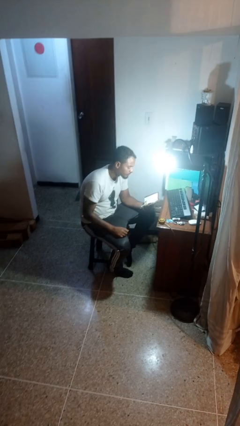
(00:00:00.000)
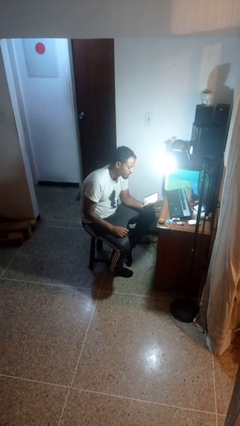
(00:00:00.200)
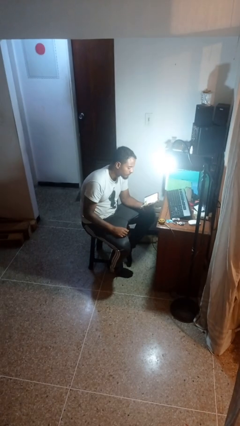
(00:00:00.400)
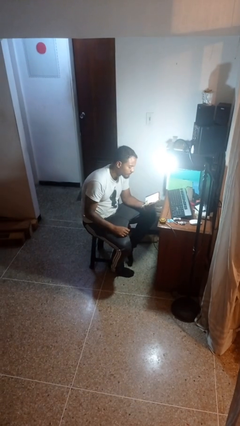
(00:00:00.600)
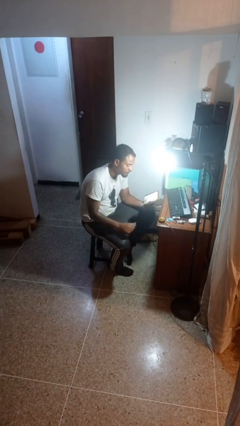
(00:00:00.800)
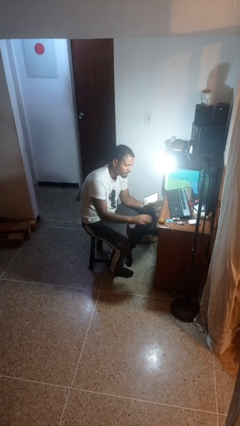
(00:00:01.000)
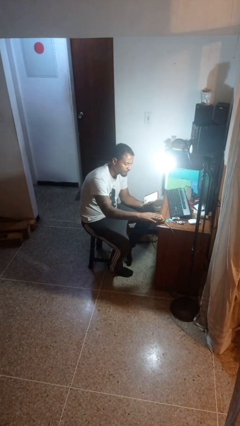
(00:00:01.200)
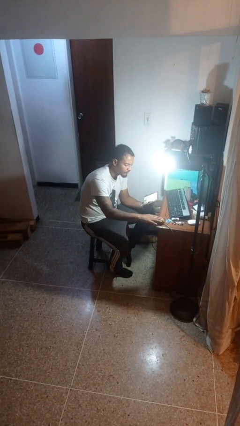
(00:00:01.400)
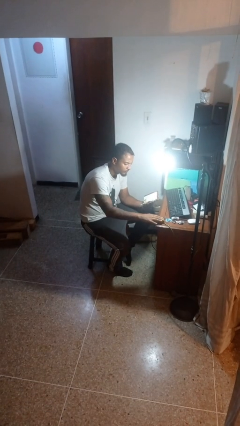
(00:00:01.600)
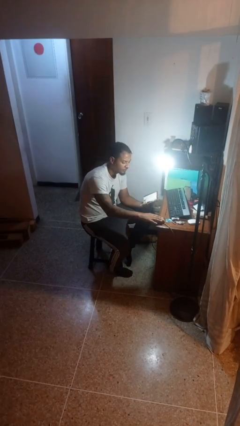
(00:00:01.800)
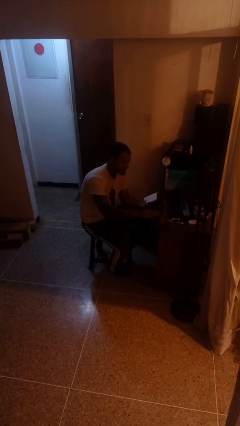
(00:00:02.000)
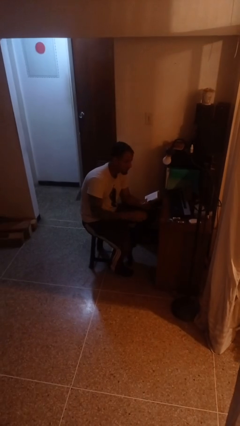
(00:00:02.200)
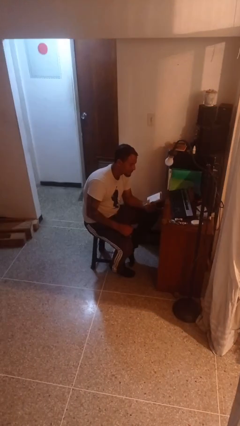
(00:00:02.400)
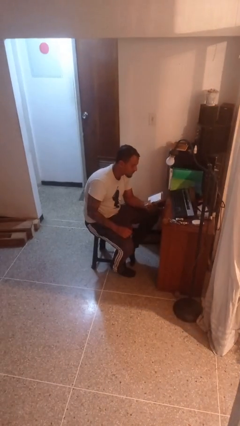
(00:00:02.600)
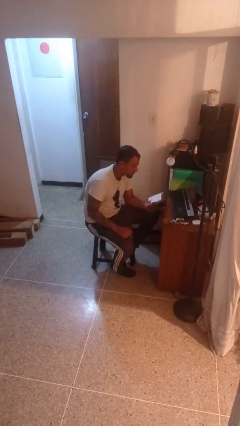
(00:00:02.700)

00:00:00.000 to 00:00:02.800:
person turns off lamp

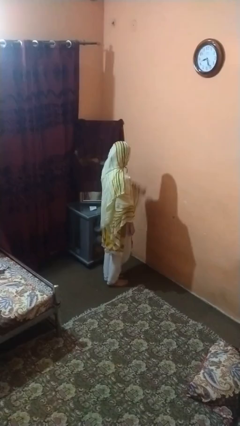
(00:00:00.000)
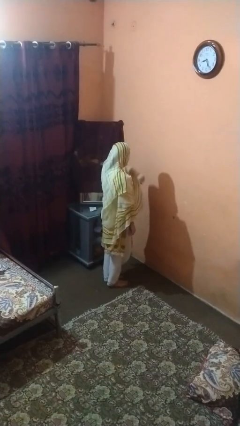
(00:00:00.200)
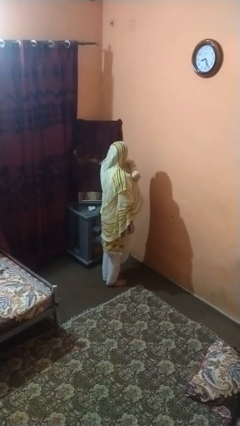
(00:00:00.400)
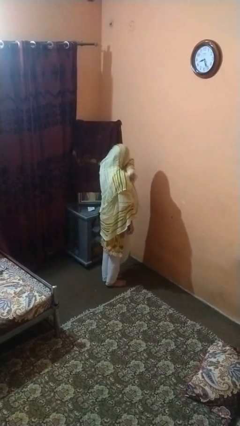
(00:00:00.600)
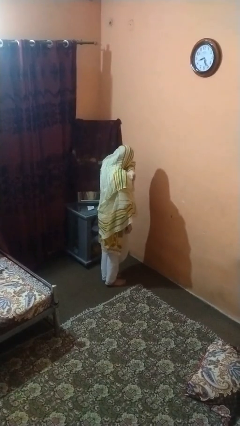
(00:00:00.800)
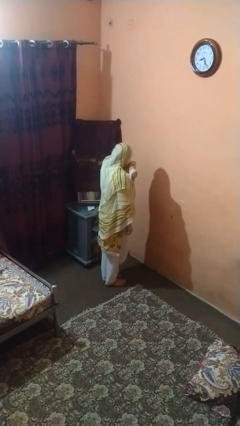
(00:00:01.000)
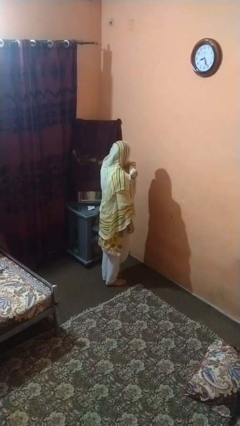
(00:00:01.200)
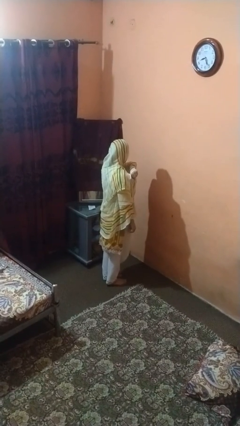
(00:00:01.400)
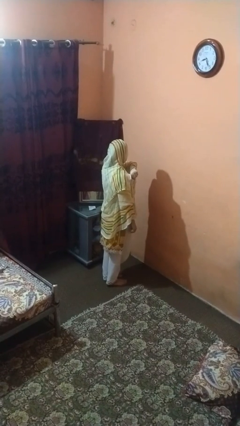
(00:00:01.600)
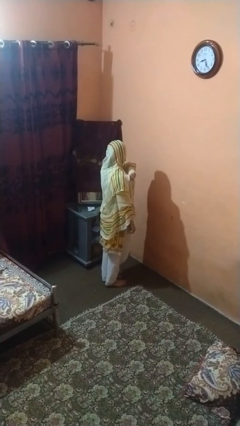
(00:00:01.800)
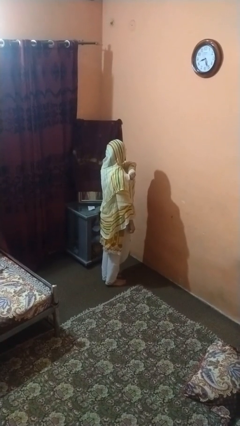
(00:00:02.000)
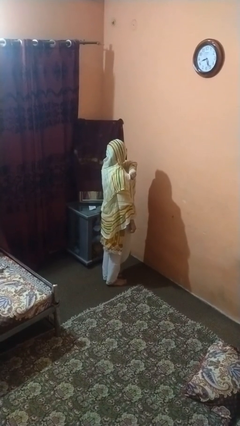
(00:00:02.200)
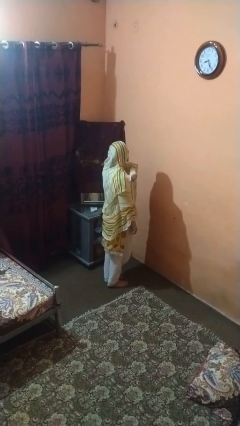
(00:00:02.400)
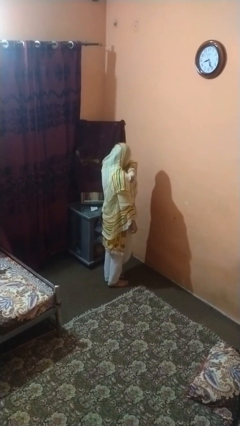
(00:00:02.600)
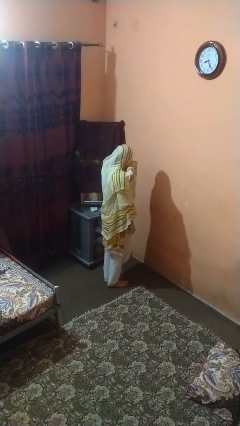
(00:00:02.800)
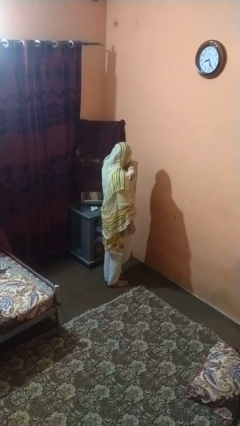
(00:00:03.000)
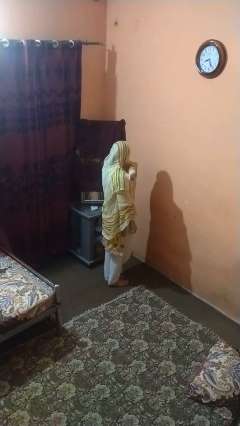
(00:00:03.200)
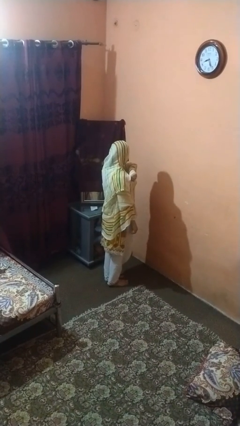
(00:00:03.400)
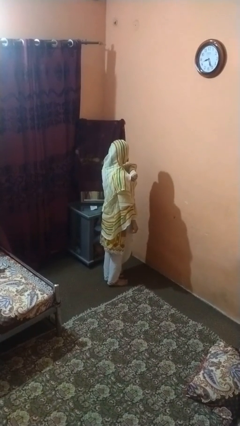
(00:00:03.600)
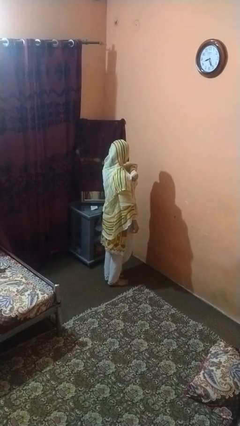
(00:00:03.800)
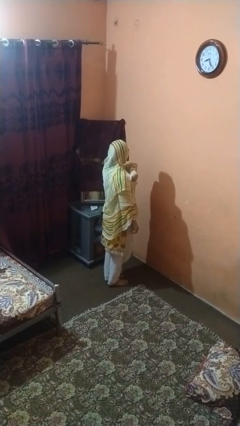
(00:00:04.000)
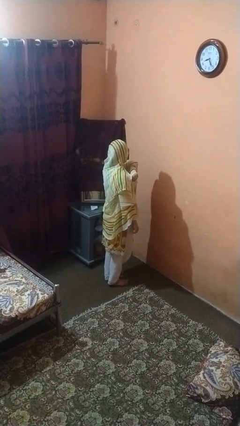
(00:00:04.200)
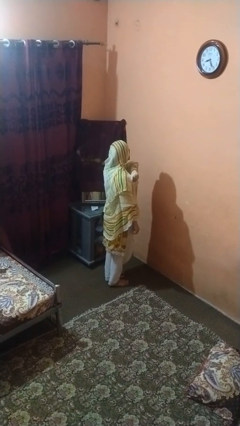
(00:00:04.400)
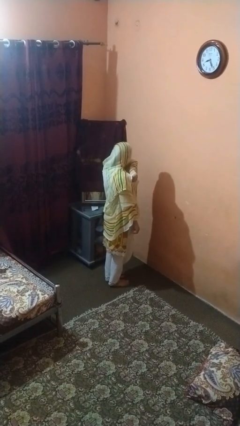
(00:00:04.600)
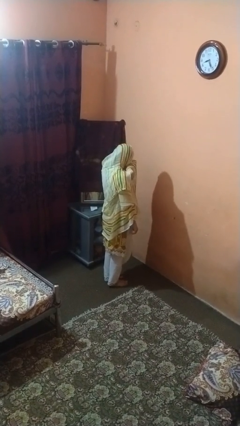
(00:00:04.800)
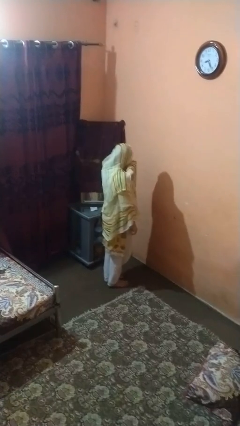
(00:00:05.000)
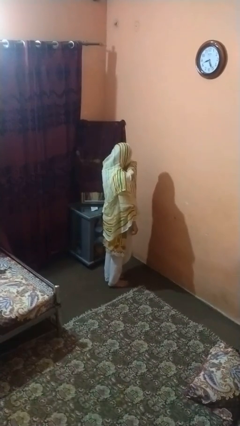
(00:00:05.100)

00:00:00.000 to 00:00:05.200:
person sneezes into arm

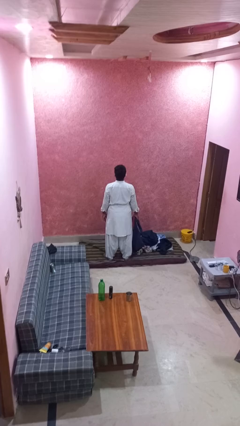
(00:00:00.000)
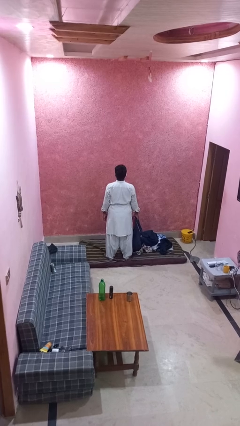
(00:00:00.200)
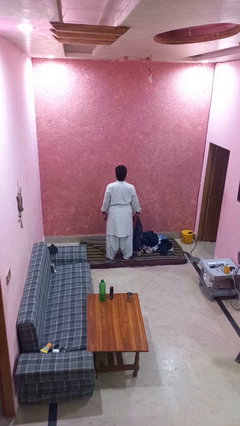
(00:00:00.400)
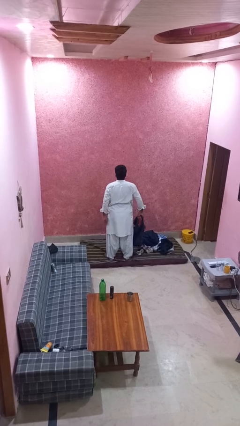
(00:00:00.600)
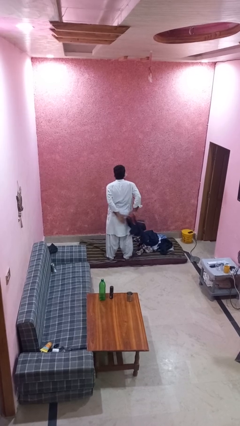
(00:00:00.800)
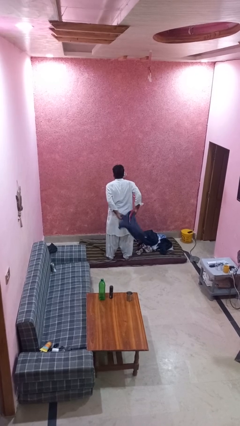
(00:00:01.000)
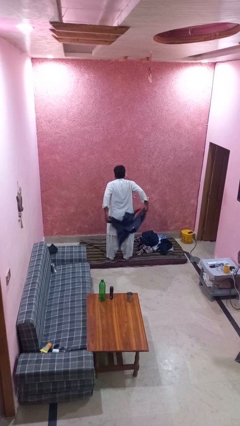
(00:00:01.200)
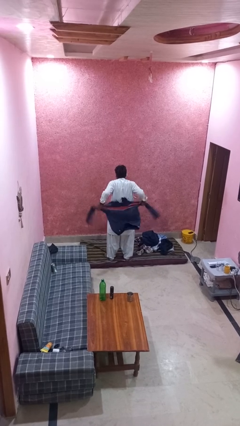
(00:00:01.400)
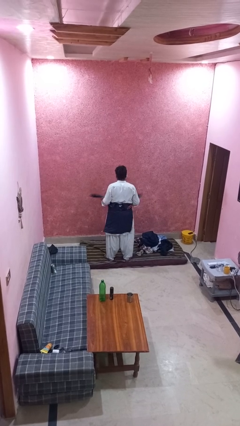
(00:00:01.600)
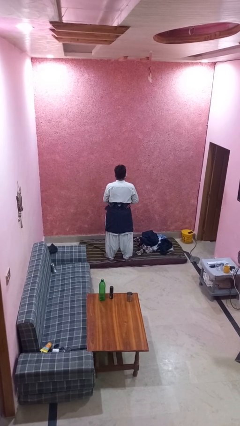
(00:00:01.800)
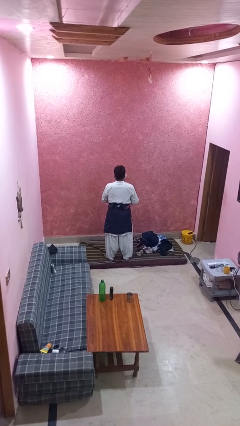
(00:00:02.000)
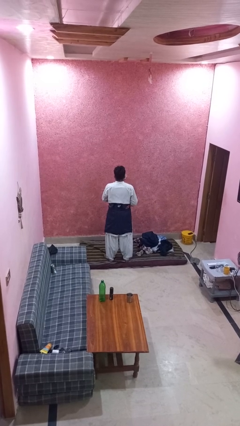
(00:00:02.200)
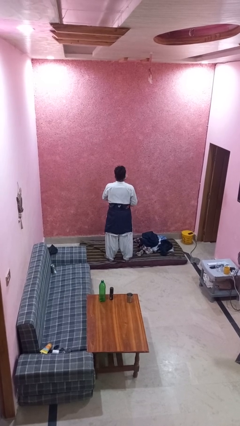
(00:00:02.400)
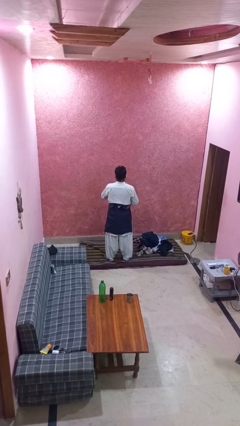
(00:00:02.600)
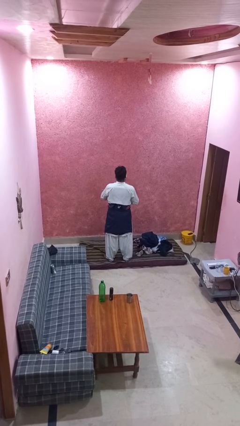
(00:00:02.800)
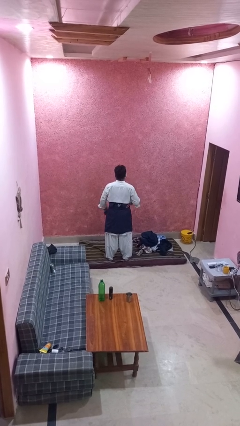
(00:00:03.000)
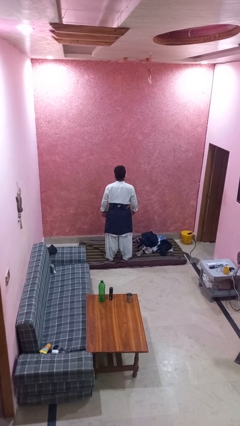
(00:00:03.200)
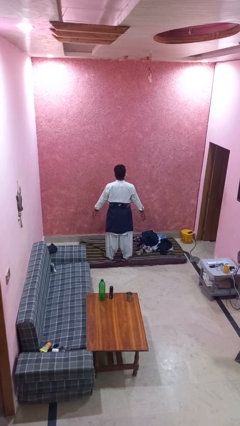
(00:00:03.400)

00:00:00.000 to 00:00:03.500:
person ties jacket around waist

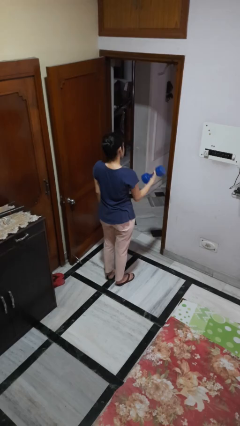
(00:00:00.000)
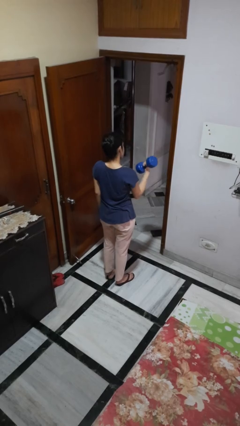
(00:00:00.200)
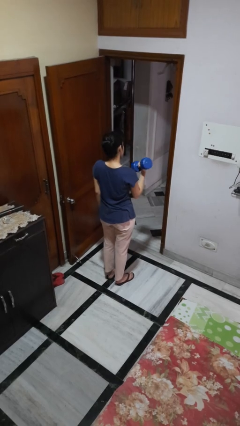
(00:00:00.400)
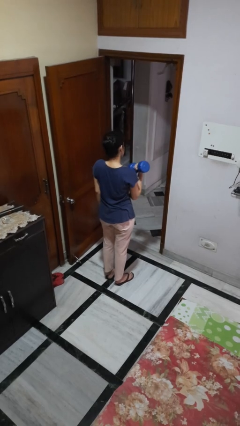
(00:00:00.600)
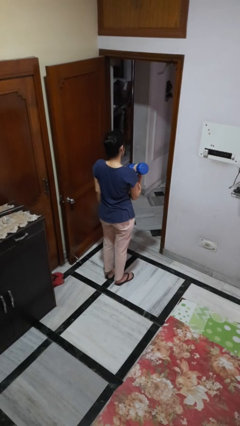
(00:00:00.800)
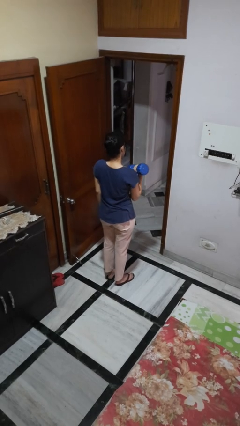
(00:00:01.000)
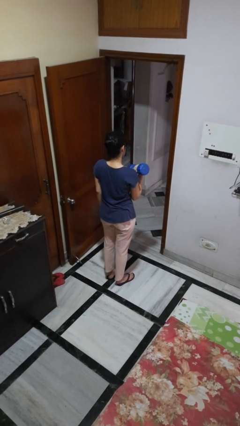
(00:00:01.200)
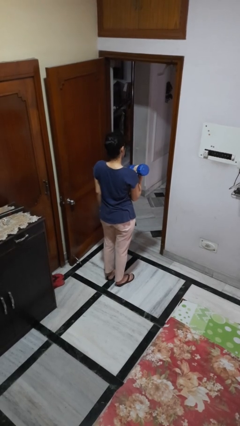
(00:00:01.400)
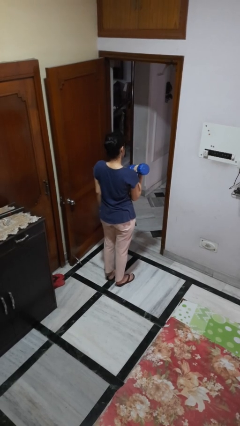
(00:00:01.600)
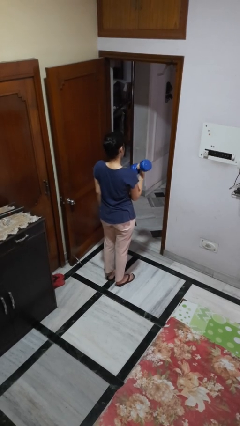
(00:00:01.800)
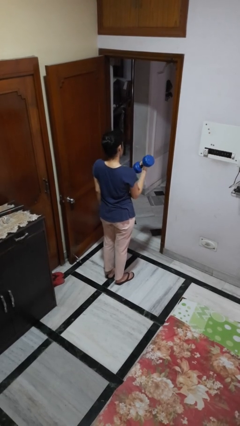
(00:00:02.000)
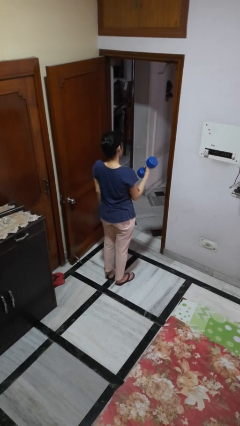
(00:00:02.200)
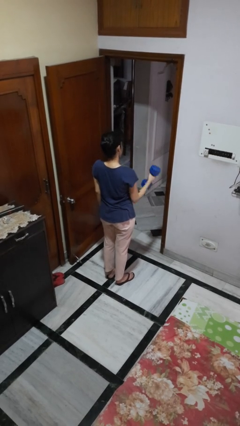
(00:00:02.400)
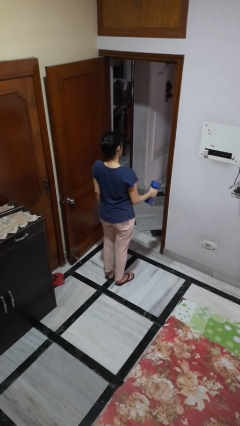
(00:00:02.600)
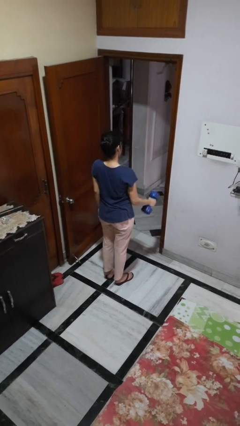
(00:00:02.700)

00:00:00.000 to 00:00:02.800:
person lifts dumbbells

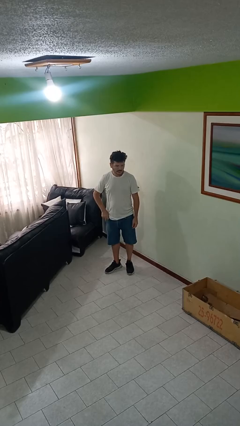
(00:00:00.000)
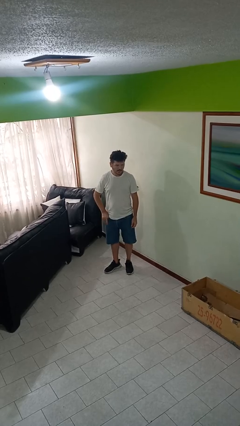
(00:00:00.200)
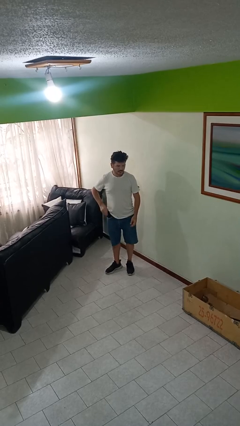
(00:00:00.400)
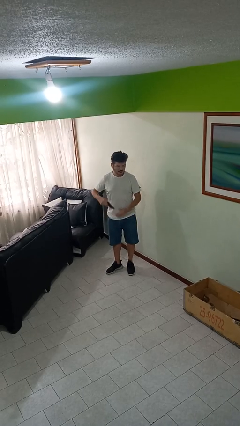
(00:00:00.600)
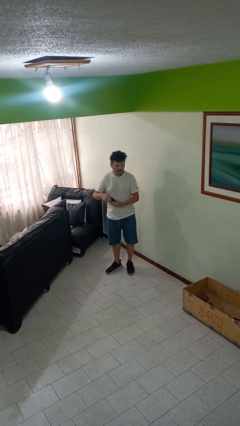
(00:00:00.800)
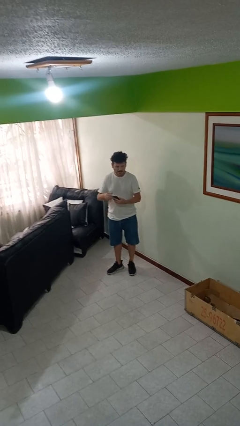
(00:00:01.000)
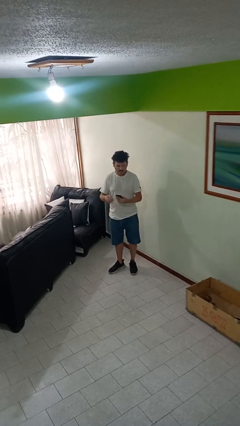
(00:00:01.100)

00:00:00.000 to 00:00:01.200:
person takes phone from pocket

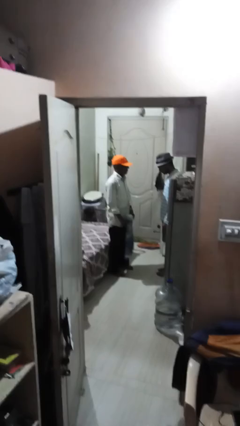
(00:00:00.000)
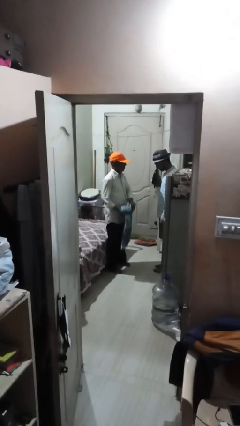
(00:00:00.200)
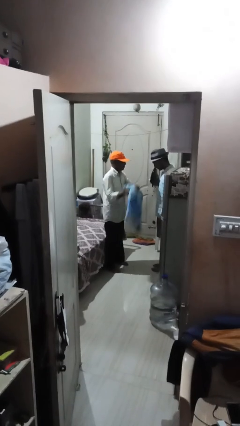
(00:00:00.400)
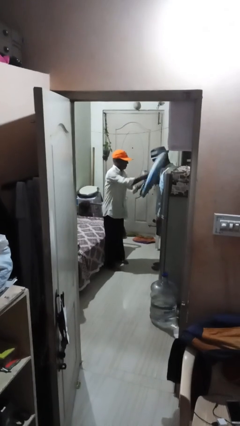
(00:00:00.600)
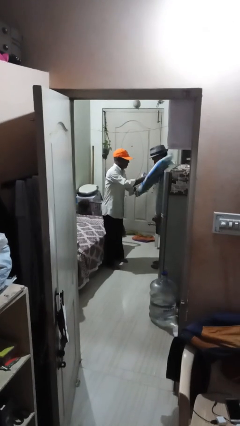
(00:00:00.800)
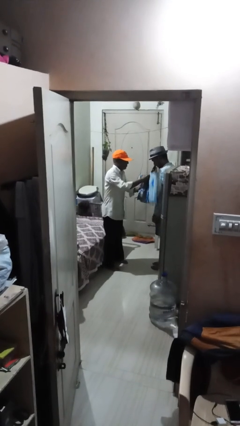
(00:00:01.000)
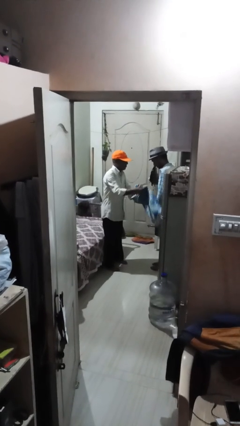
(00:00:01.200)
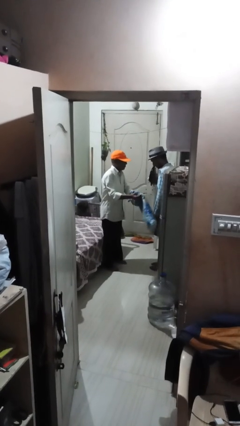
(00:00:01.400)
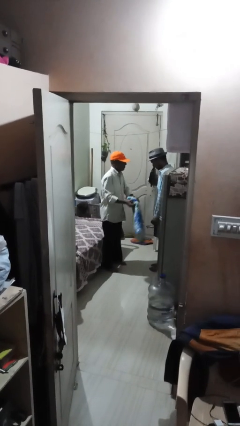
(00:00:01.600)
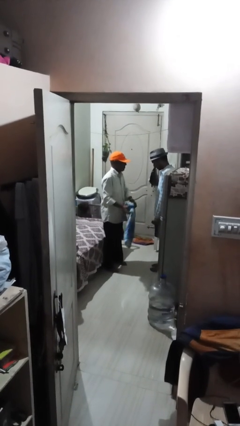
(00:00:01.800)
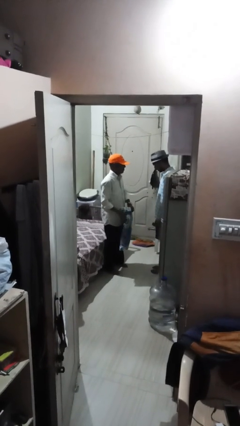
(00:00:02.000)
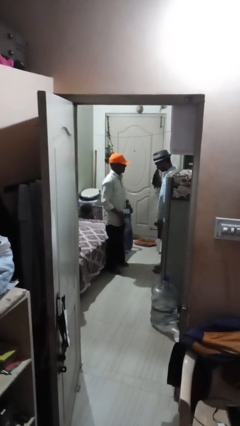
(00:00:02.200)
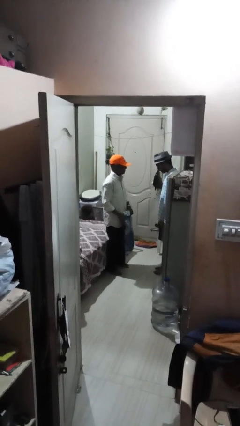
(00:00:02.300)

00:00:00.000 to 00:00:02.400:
person hits person with pillow
